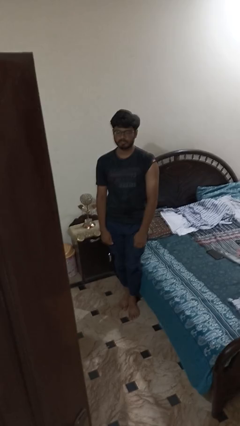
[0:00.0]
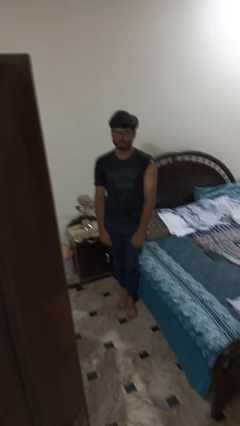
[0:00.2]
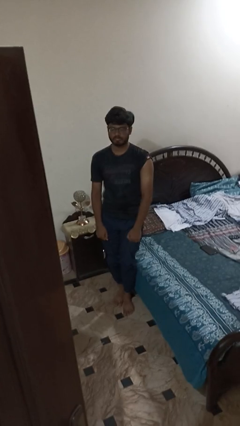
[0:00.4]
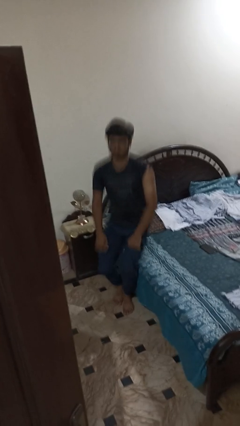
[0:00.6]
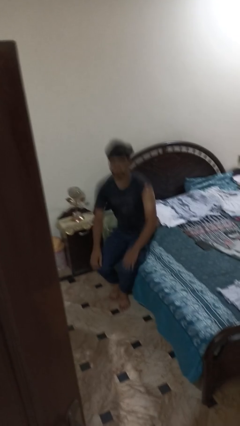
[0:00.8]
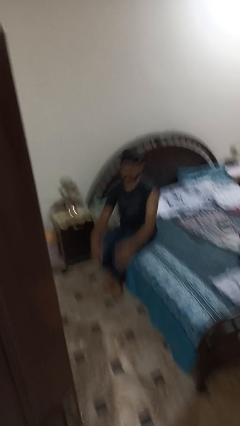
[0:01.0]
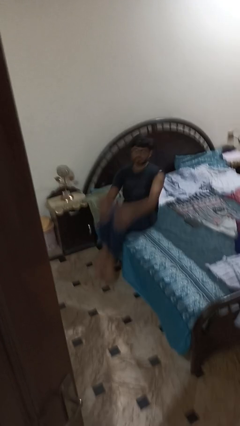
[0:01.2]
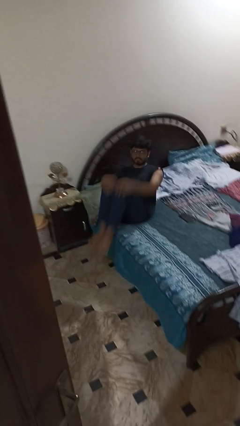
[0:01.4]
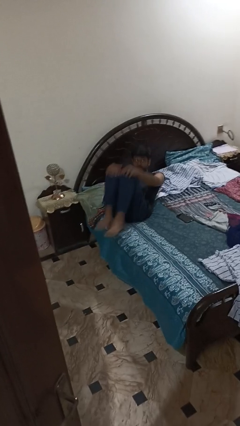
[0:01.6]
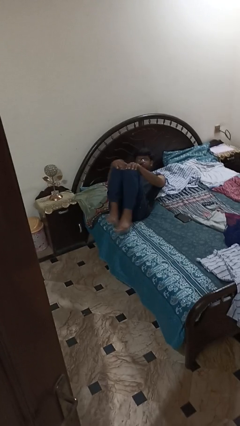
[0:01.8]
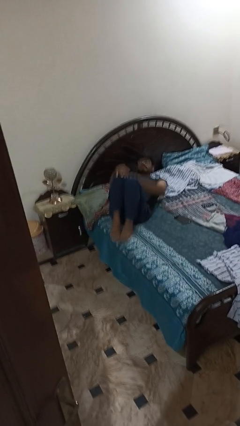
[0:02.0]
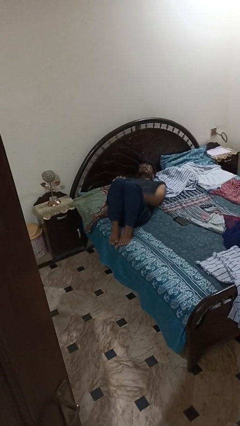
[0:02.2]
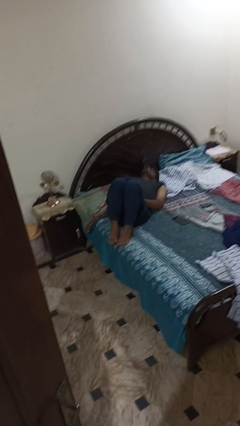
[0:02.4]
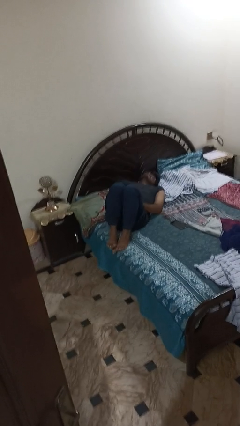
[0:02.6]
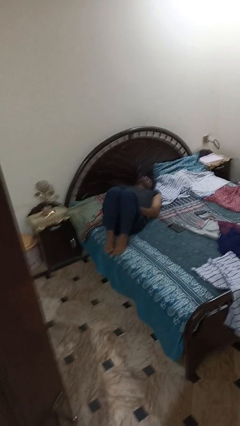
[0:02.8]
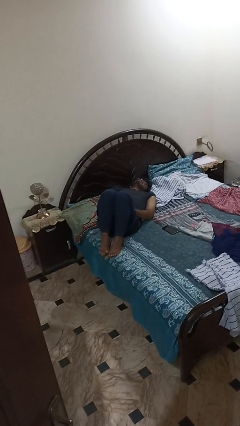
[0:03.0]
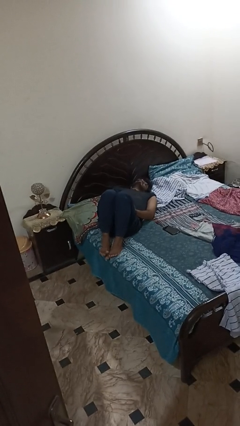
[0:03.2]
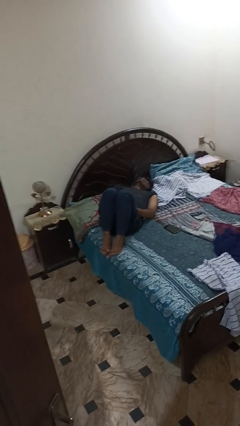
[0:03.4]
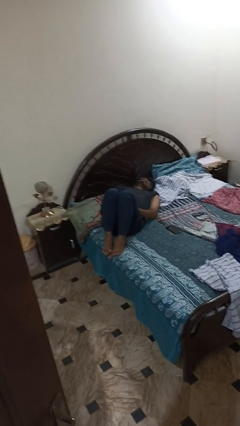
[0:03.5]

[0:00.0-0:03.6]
person lies down on bed

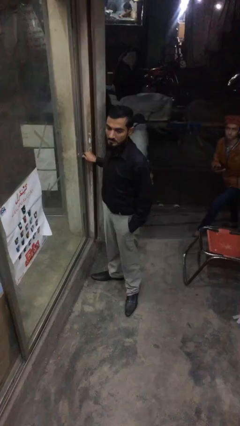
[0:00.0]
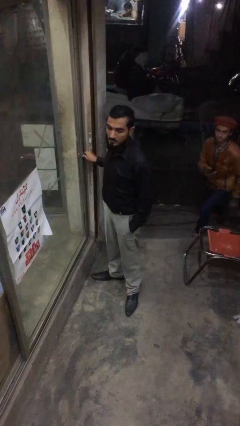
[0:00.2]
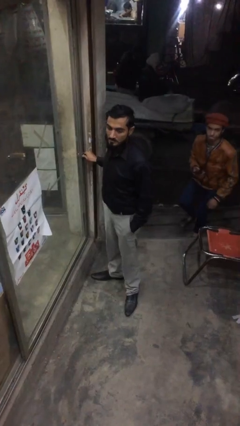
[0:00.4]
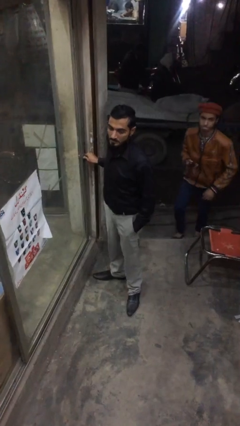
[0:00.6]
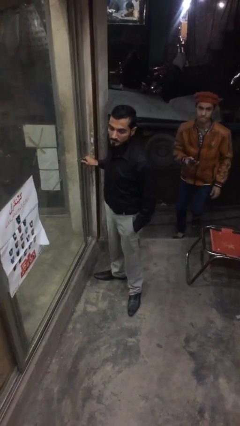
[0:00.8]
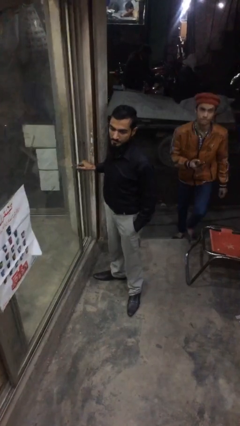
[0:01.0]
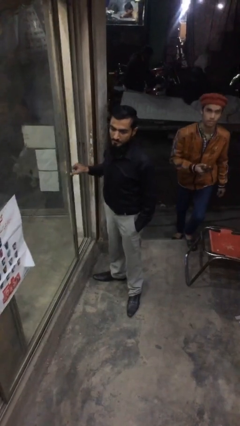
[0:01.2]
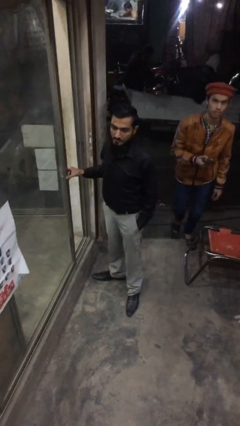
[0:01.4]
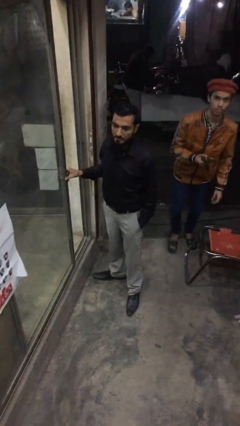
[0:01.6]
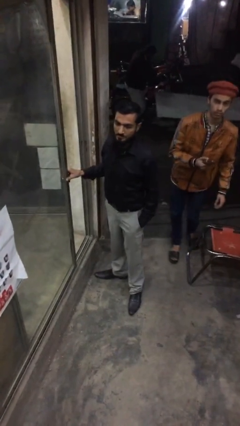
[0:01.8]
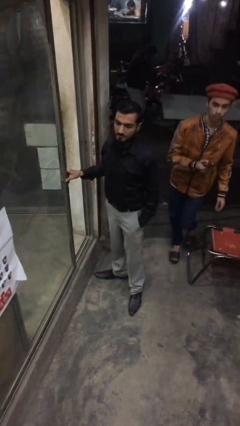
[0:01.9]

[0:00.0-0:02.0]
person opens facility door

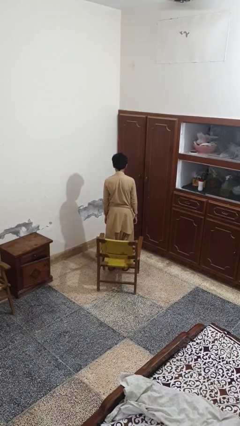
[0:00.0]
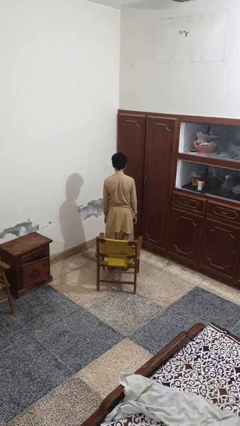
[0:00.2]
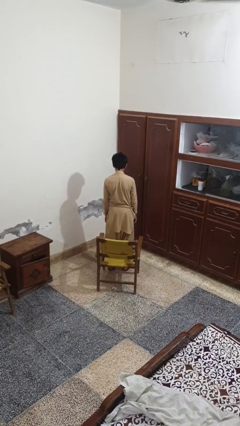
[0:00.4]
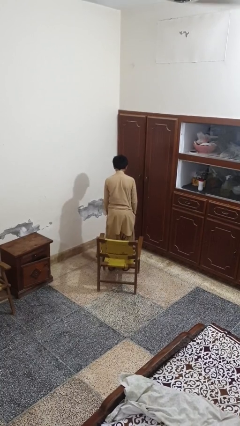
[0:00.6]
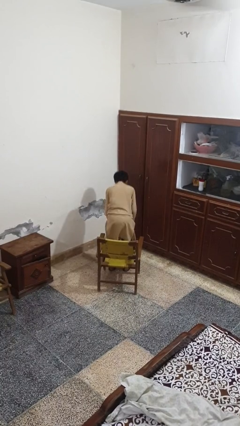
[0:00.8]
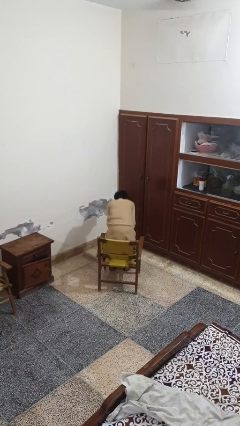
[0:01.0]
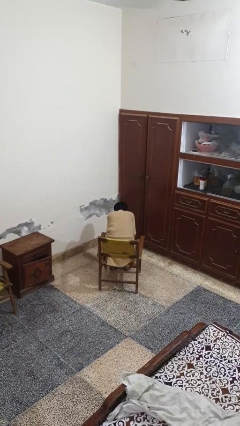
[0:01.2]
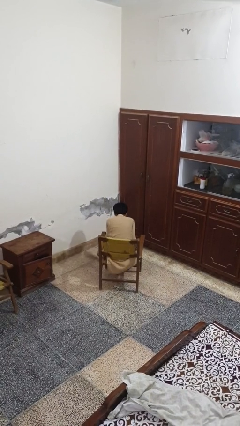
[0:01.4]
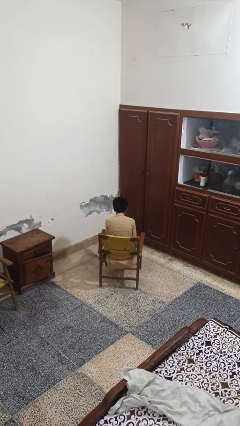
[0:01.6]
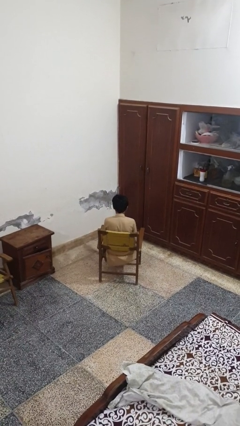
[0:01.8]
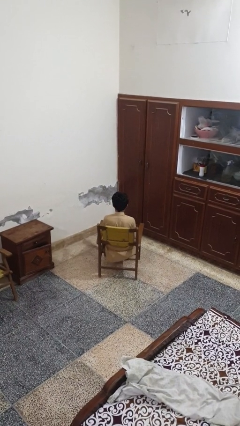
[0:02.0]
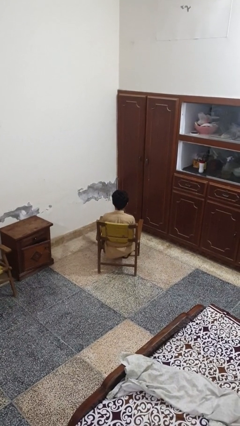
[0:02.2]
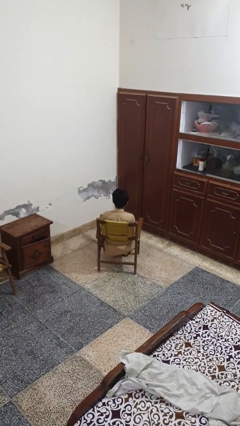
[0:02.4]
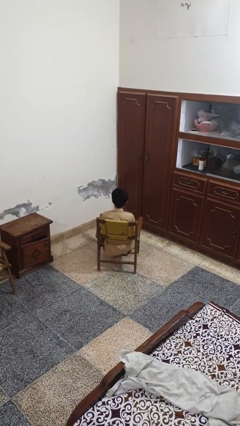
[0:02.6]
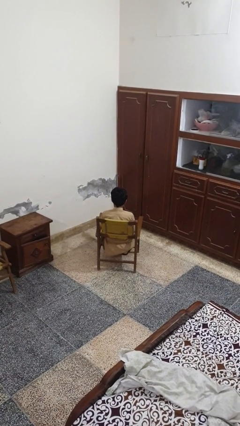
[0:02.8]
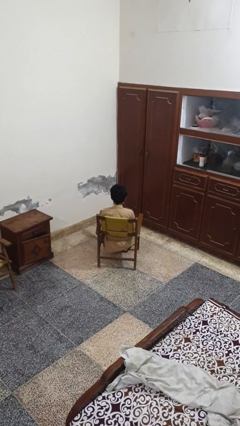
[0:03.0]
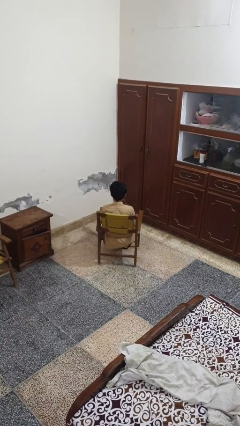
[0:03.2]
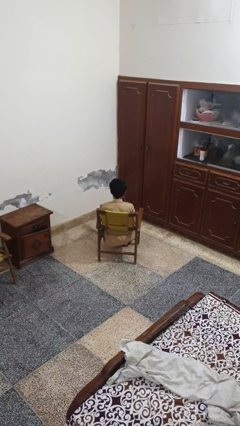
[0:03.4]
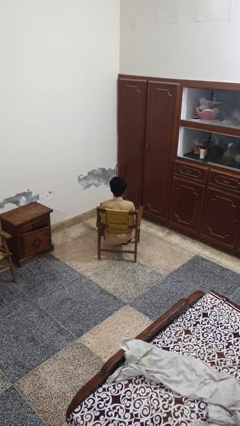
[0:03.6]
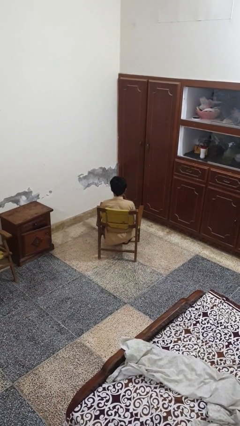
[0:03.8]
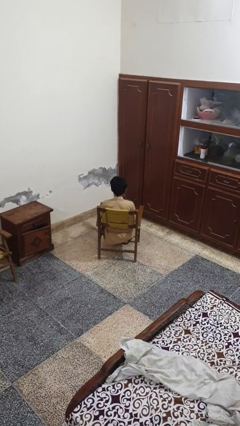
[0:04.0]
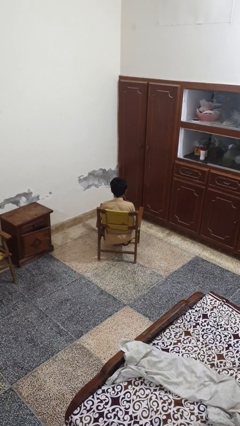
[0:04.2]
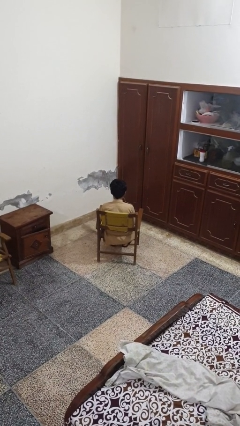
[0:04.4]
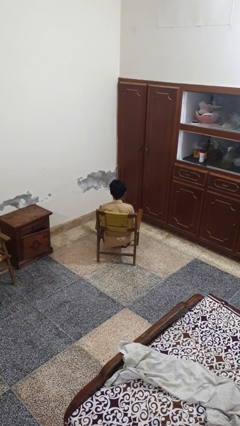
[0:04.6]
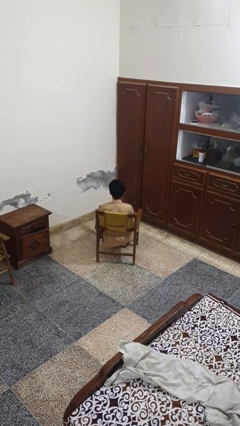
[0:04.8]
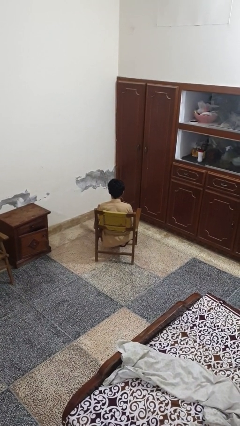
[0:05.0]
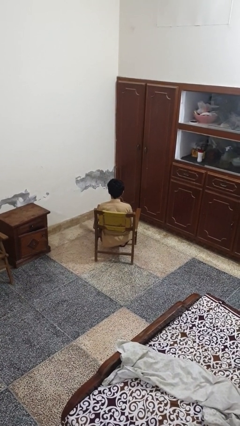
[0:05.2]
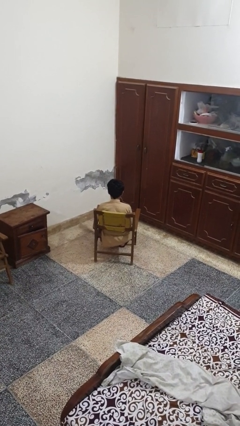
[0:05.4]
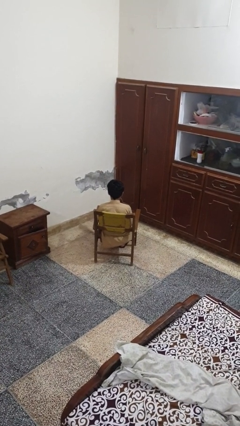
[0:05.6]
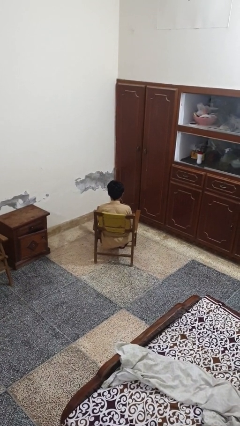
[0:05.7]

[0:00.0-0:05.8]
person sits down

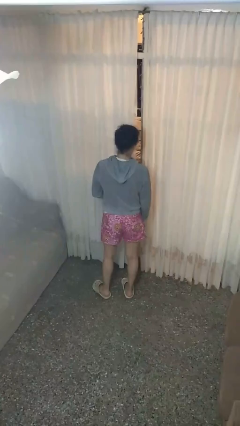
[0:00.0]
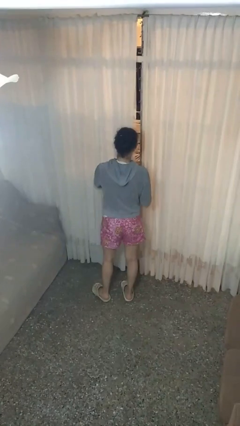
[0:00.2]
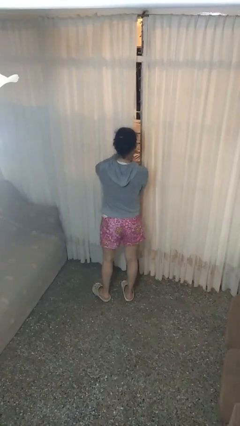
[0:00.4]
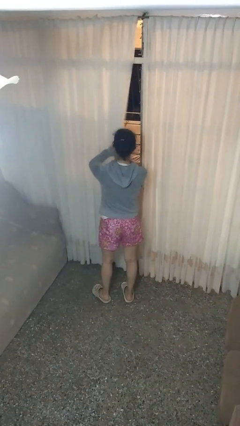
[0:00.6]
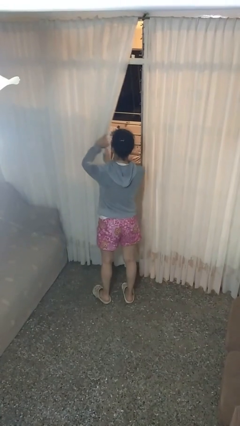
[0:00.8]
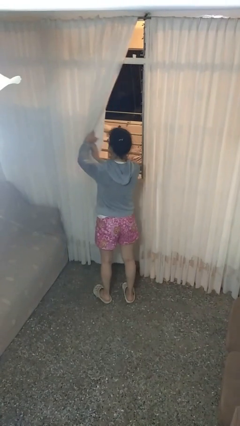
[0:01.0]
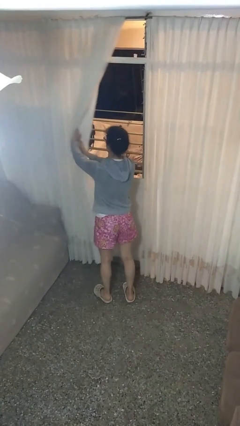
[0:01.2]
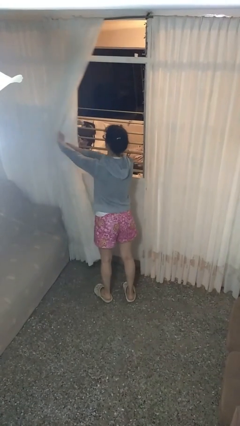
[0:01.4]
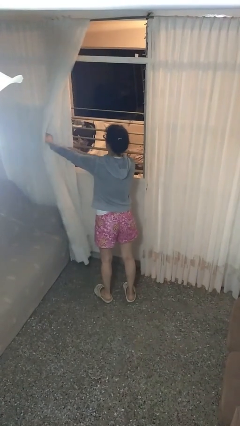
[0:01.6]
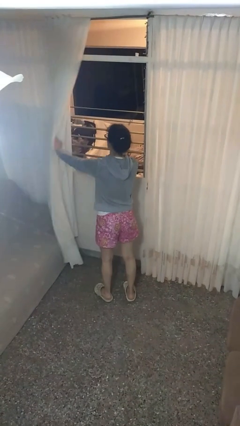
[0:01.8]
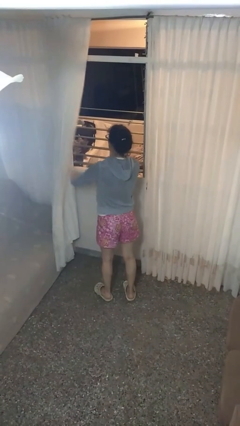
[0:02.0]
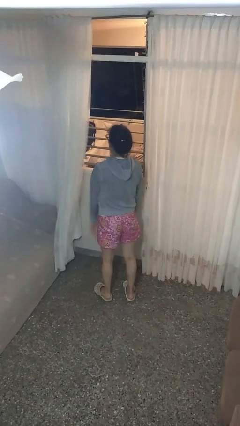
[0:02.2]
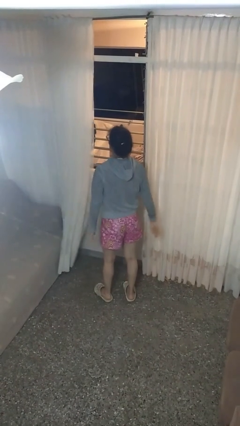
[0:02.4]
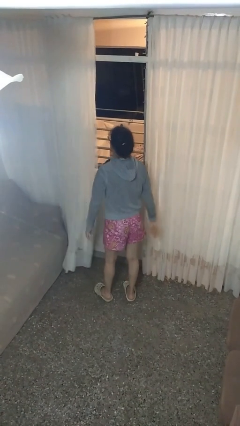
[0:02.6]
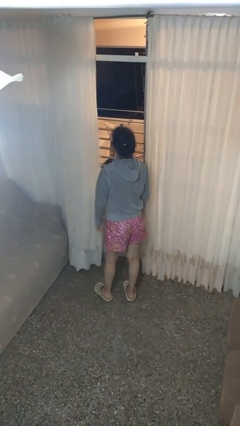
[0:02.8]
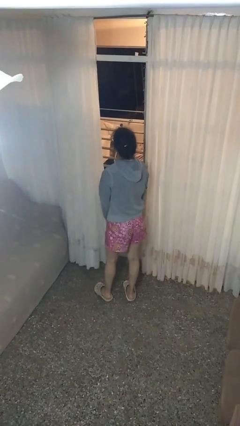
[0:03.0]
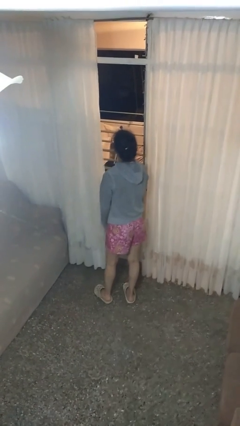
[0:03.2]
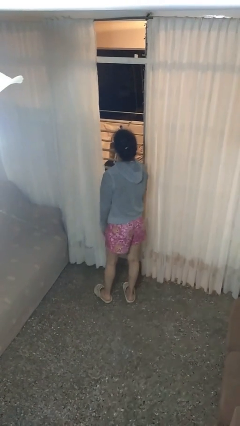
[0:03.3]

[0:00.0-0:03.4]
person opens curtains

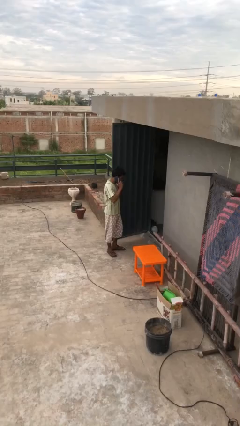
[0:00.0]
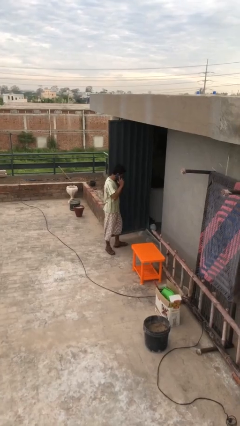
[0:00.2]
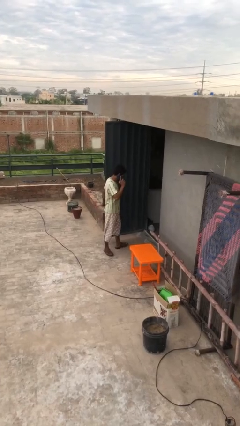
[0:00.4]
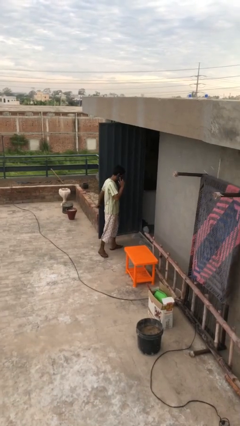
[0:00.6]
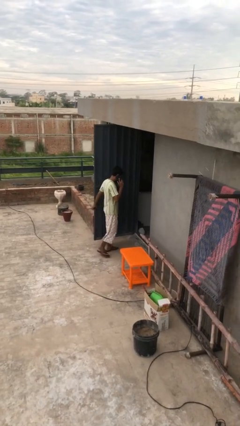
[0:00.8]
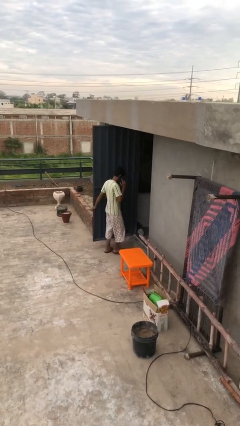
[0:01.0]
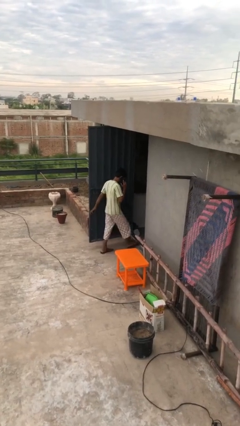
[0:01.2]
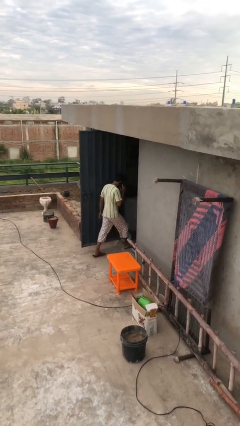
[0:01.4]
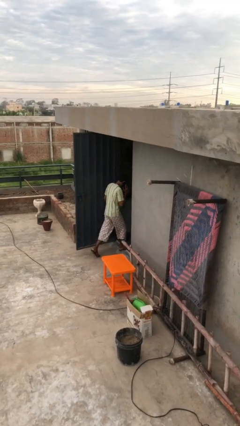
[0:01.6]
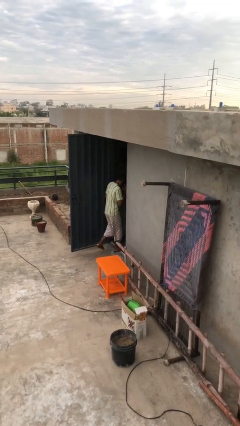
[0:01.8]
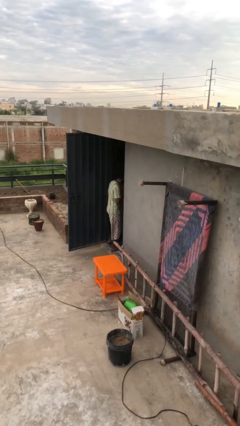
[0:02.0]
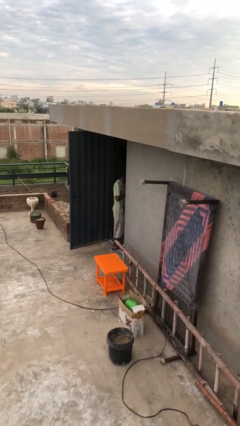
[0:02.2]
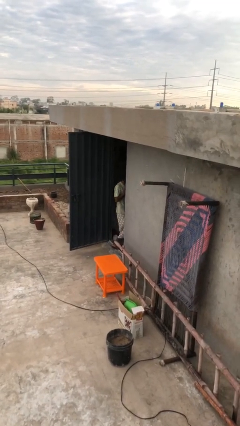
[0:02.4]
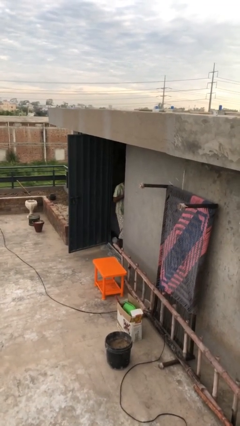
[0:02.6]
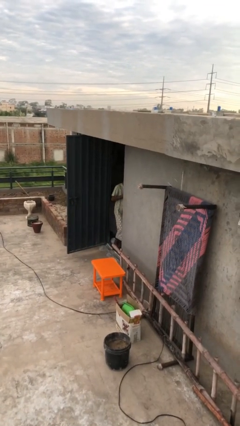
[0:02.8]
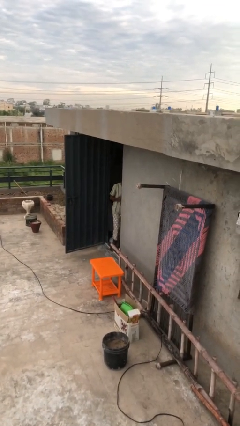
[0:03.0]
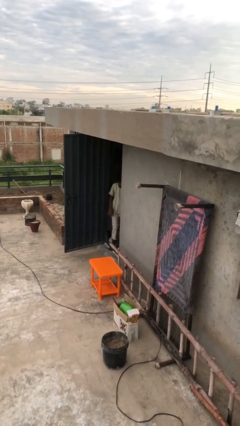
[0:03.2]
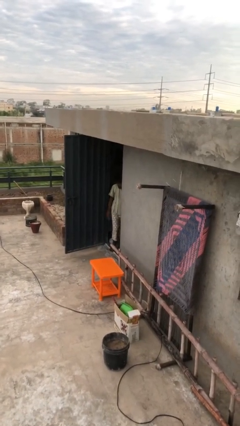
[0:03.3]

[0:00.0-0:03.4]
person exits scene through structure
